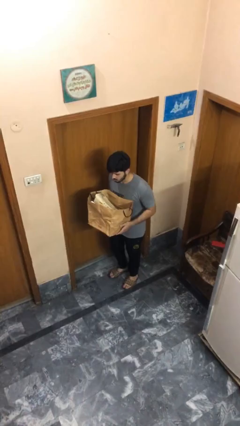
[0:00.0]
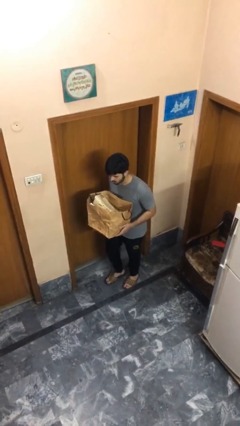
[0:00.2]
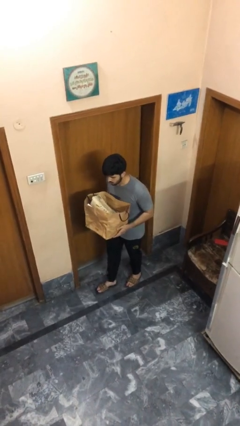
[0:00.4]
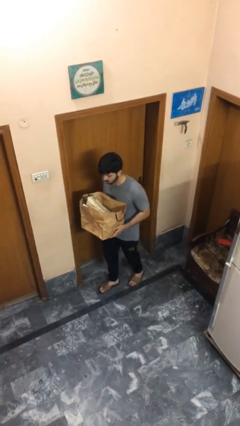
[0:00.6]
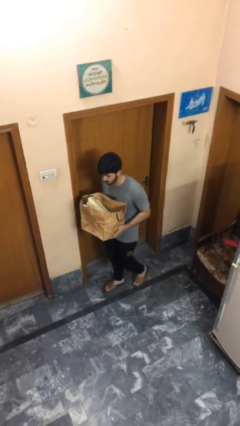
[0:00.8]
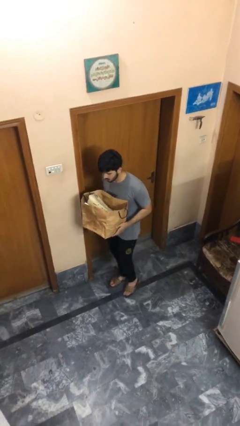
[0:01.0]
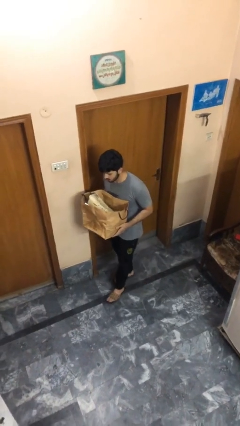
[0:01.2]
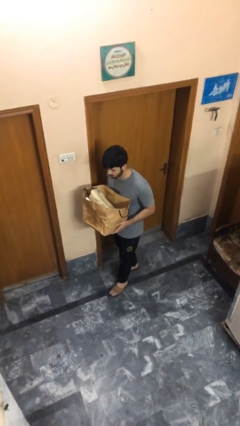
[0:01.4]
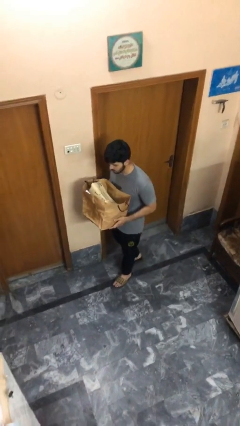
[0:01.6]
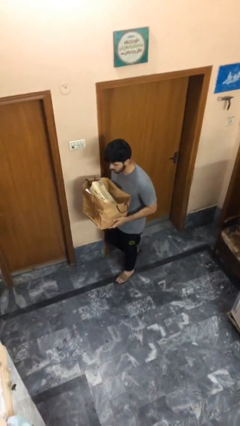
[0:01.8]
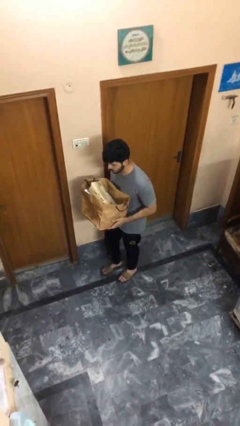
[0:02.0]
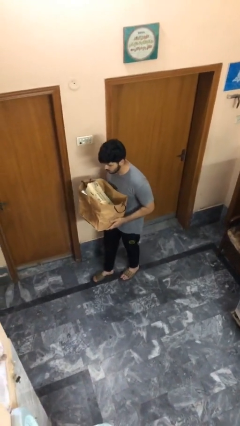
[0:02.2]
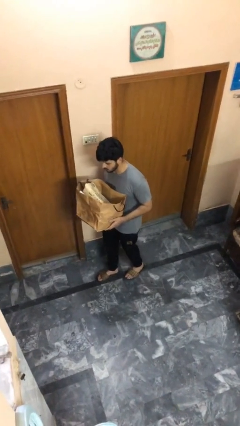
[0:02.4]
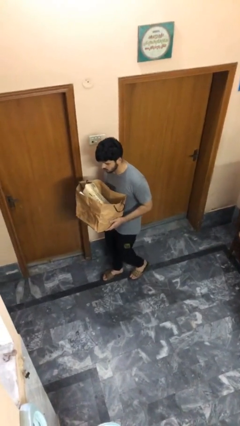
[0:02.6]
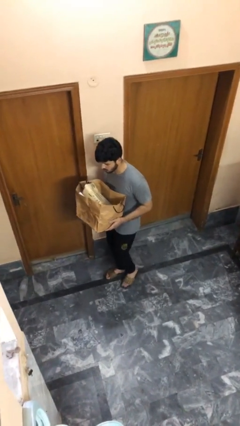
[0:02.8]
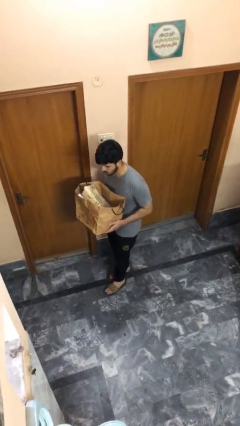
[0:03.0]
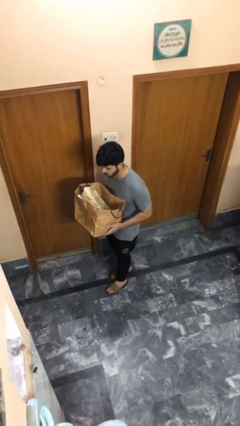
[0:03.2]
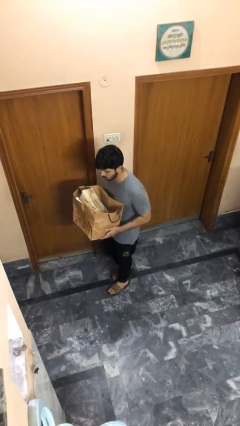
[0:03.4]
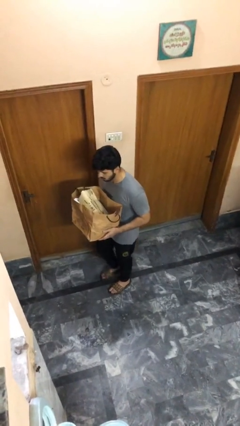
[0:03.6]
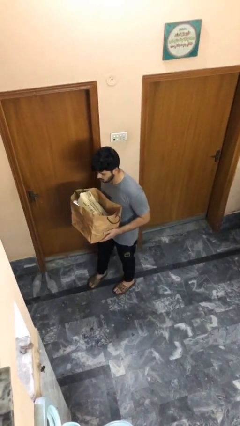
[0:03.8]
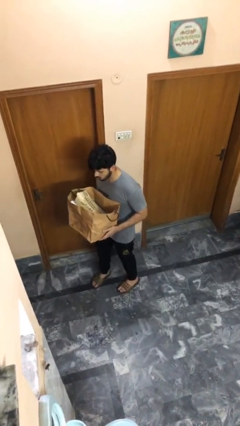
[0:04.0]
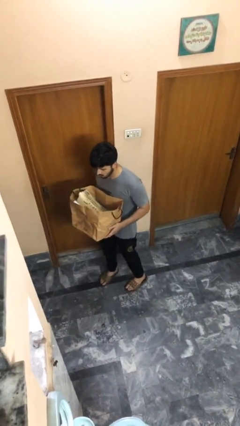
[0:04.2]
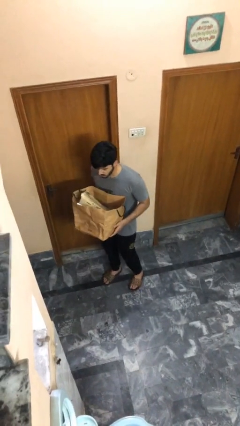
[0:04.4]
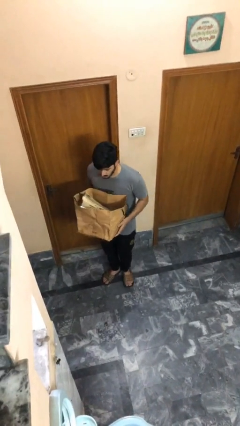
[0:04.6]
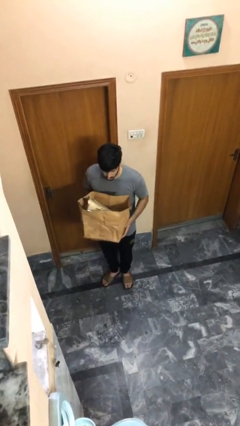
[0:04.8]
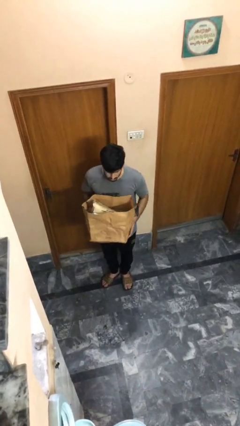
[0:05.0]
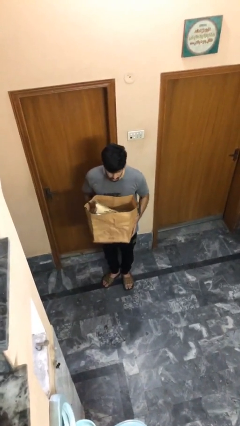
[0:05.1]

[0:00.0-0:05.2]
person carries groceries

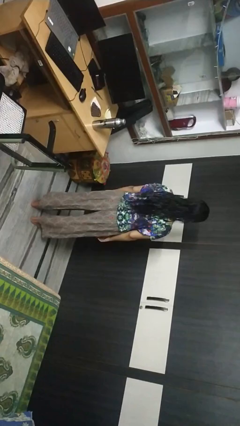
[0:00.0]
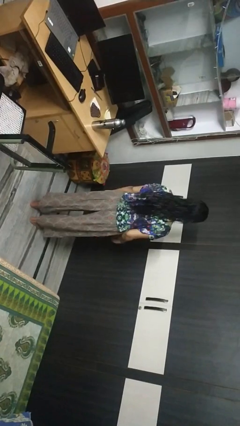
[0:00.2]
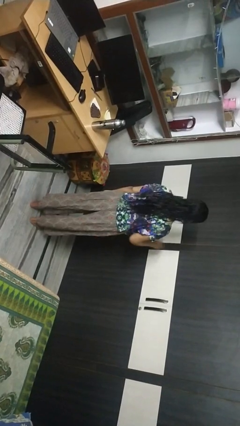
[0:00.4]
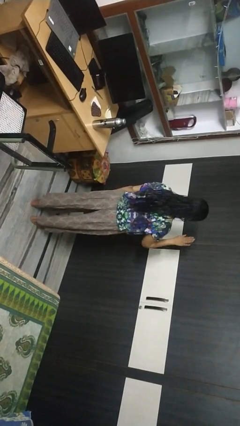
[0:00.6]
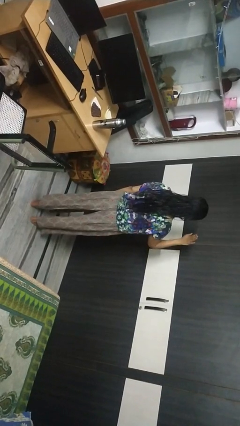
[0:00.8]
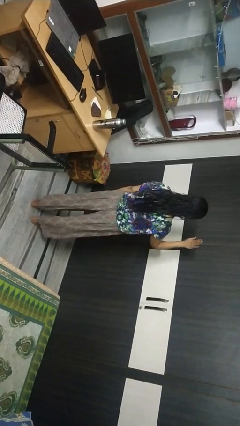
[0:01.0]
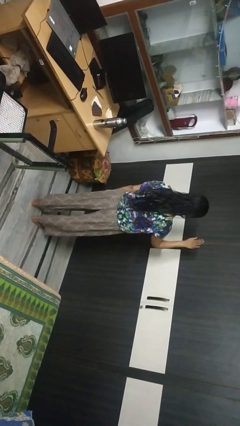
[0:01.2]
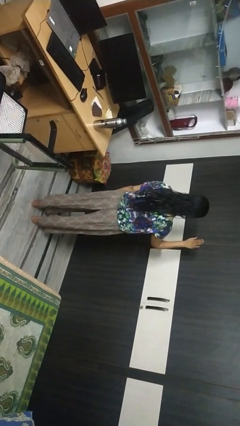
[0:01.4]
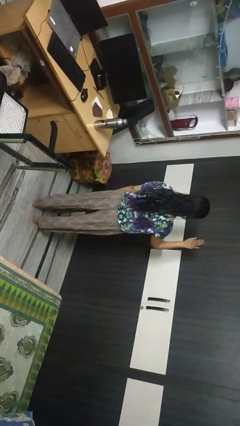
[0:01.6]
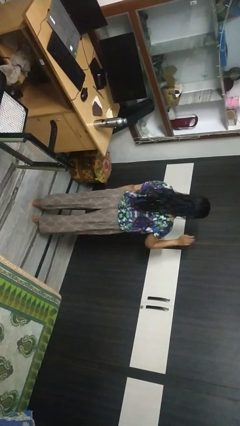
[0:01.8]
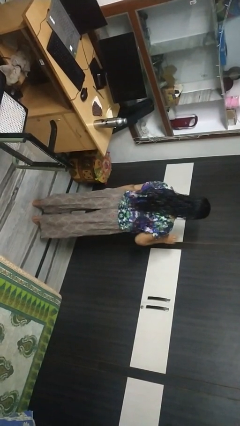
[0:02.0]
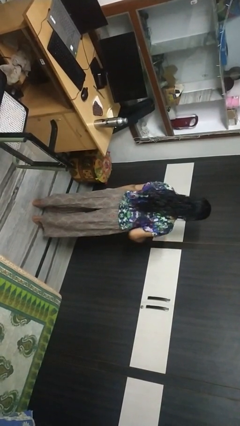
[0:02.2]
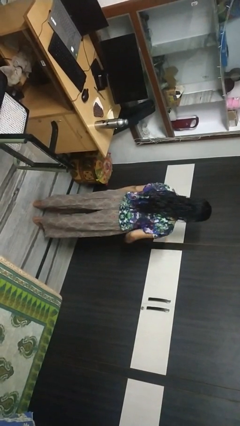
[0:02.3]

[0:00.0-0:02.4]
person gestures stop

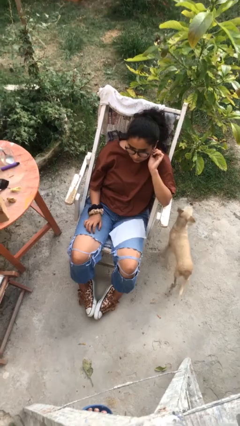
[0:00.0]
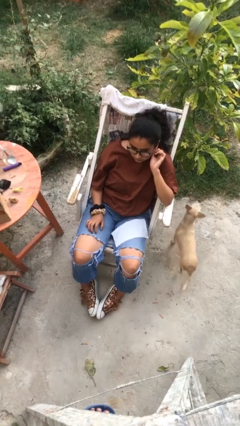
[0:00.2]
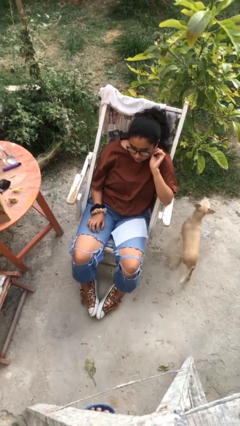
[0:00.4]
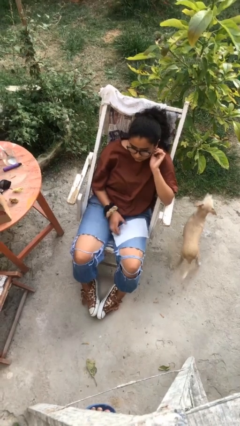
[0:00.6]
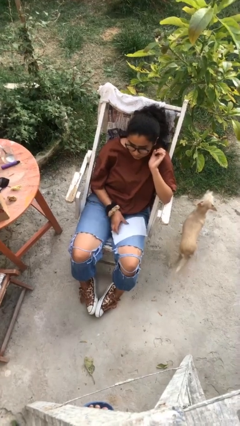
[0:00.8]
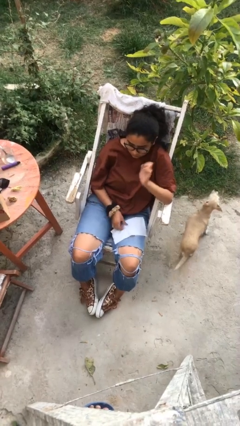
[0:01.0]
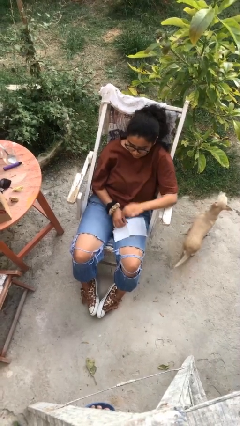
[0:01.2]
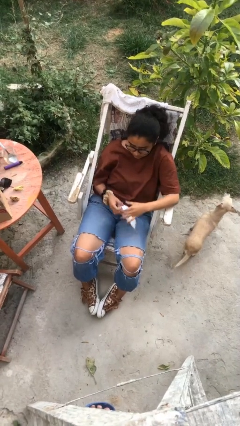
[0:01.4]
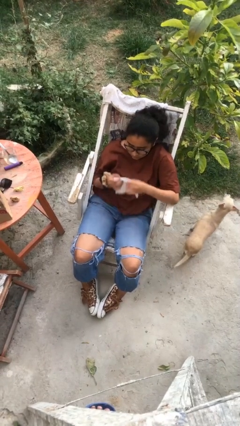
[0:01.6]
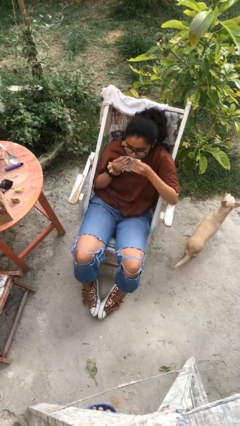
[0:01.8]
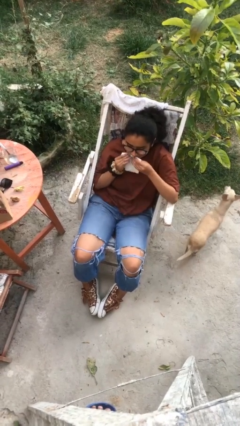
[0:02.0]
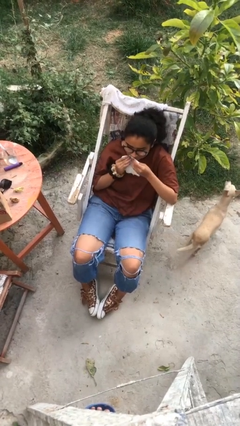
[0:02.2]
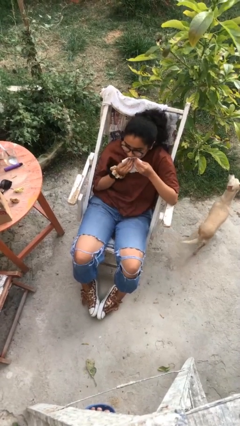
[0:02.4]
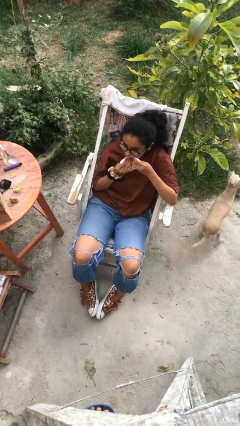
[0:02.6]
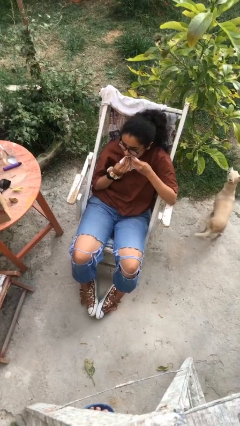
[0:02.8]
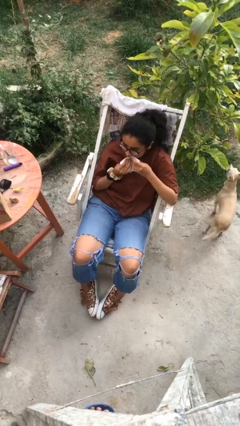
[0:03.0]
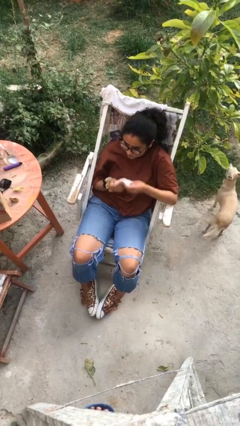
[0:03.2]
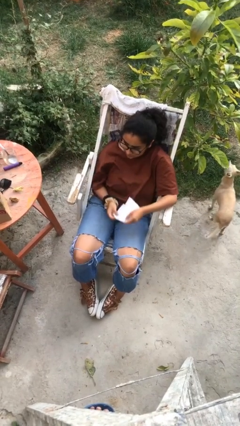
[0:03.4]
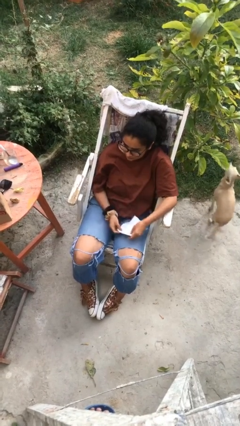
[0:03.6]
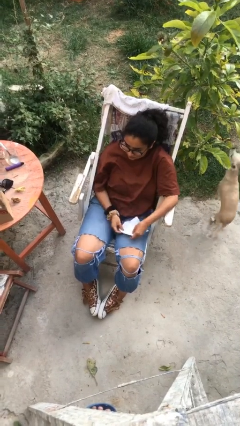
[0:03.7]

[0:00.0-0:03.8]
person wipes mouth with napkin

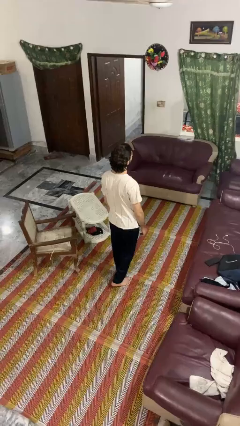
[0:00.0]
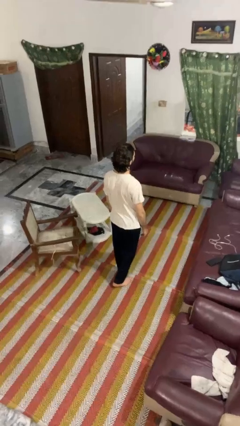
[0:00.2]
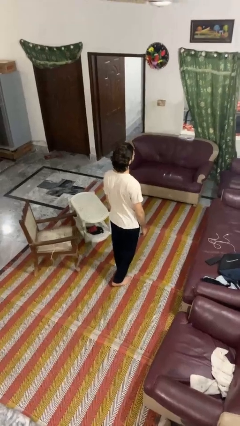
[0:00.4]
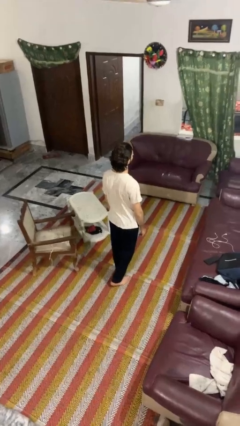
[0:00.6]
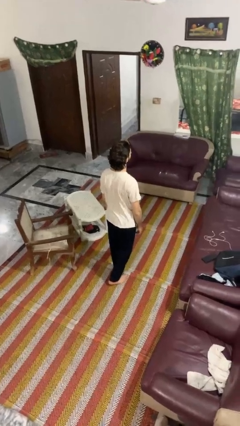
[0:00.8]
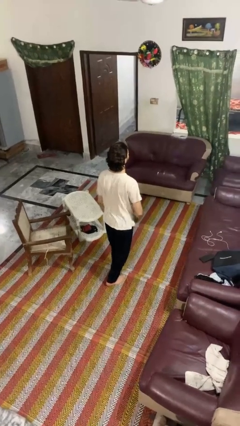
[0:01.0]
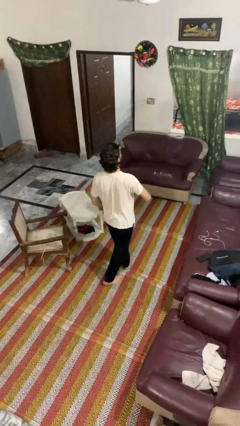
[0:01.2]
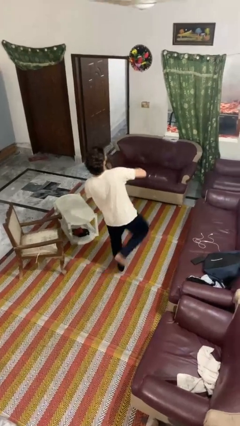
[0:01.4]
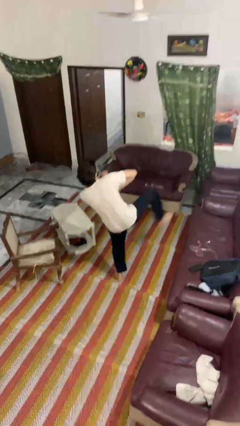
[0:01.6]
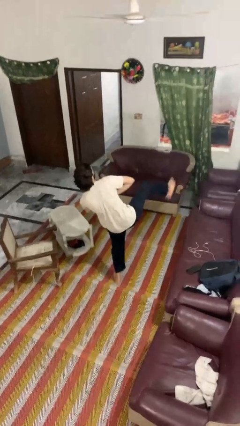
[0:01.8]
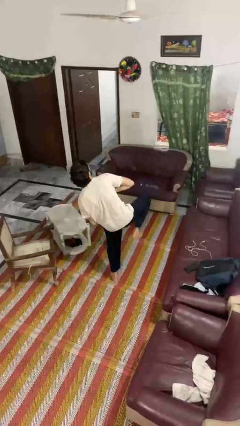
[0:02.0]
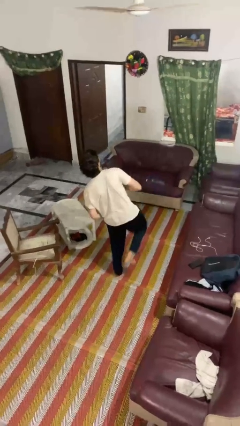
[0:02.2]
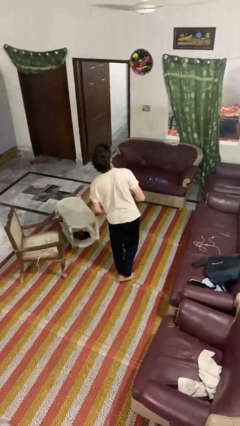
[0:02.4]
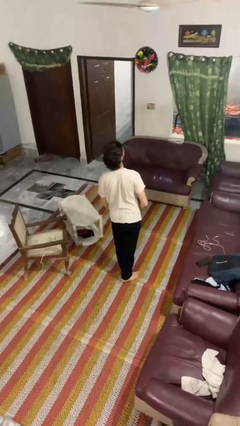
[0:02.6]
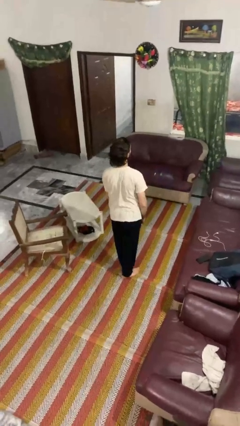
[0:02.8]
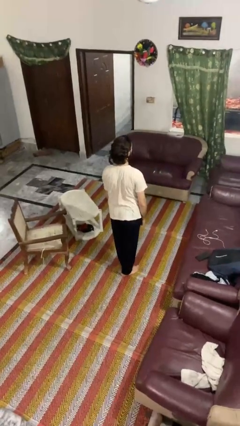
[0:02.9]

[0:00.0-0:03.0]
person karate kicks

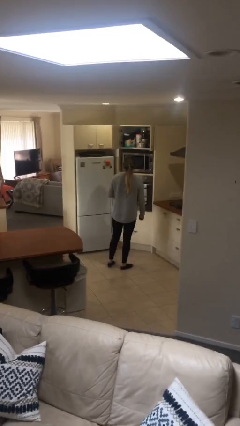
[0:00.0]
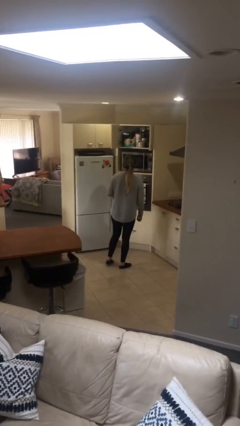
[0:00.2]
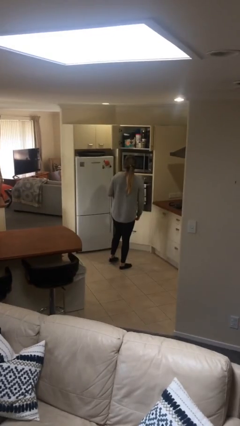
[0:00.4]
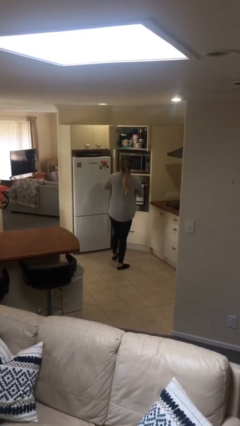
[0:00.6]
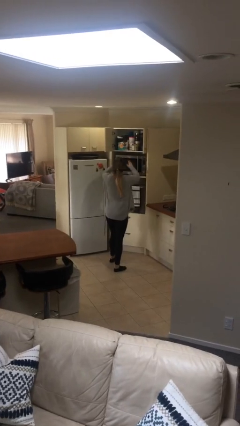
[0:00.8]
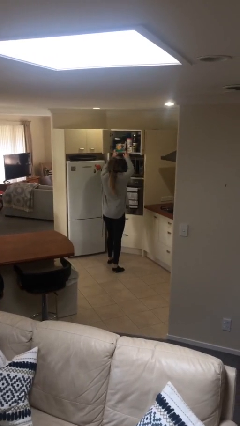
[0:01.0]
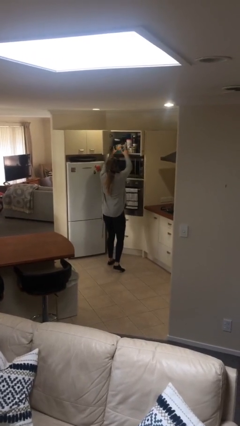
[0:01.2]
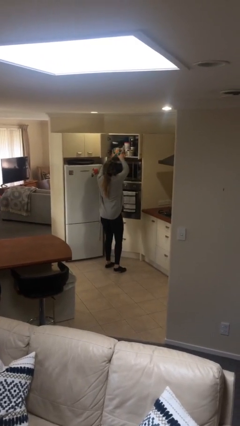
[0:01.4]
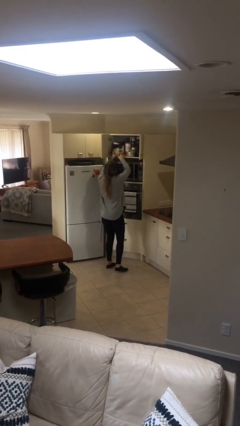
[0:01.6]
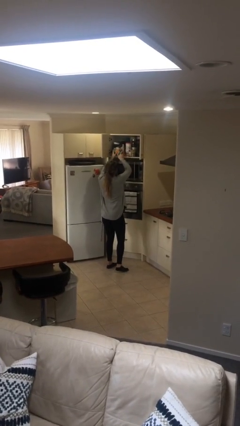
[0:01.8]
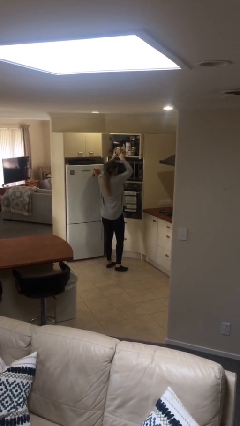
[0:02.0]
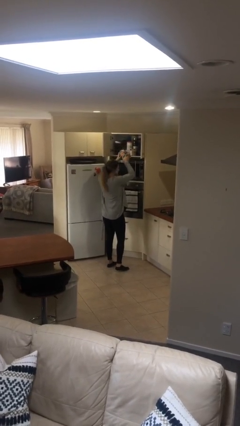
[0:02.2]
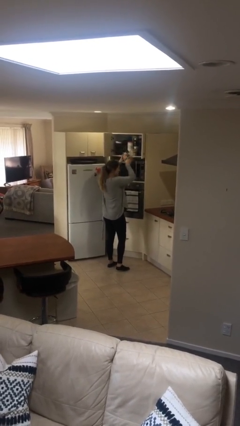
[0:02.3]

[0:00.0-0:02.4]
person picks up object from shelf

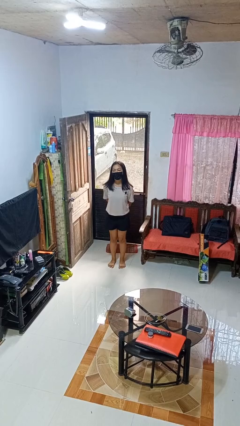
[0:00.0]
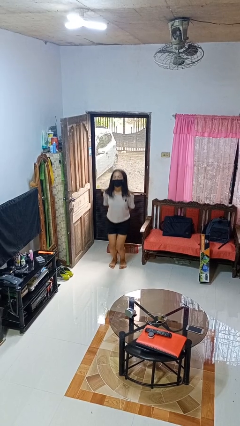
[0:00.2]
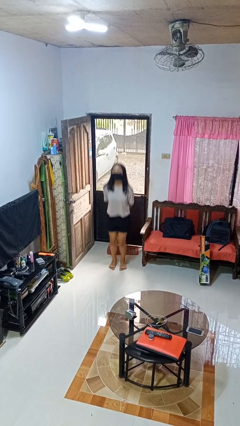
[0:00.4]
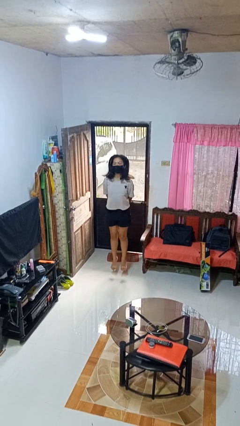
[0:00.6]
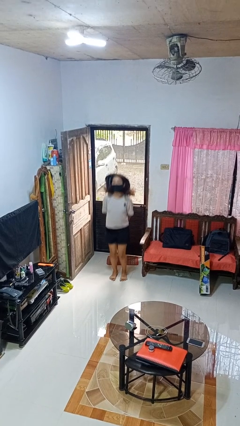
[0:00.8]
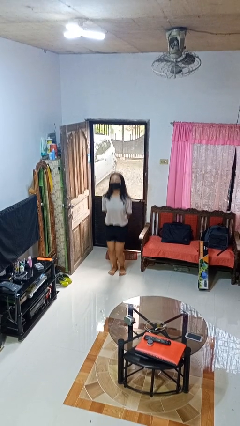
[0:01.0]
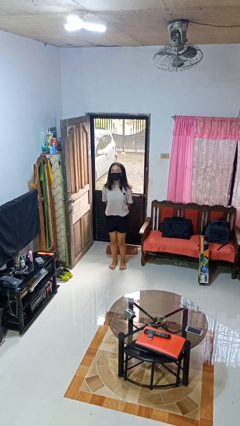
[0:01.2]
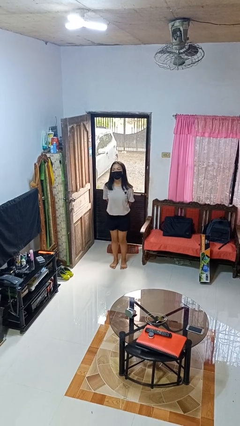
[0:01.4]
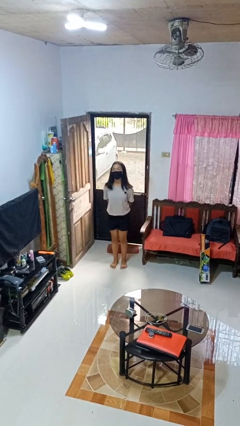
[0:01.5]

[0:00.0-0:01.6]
person jumps
